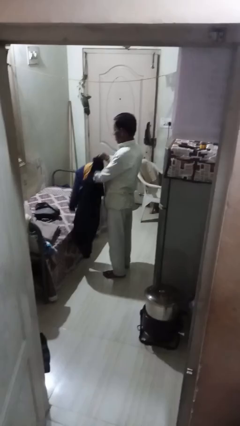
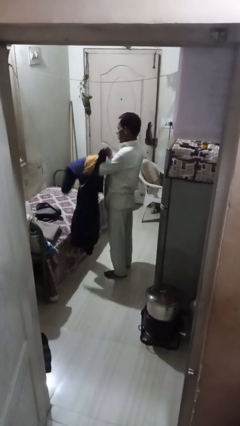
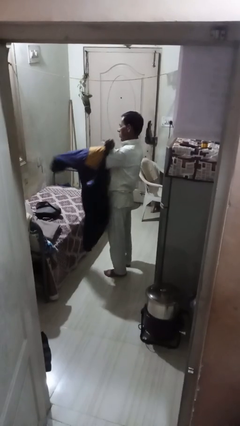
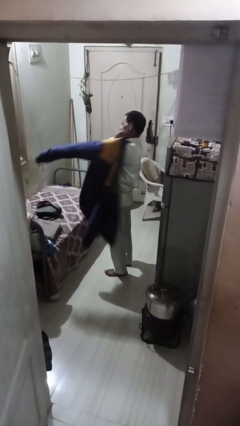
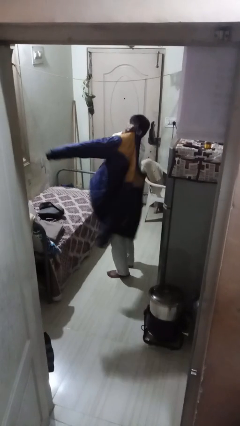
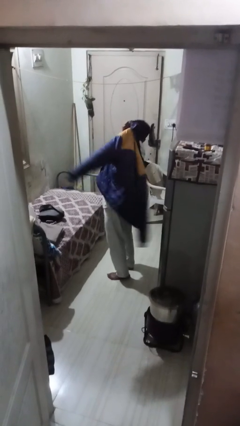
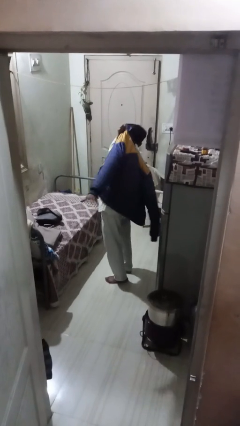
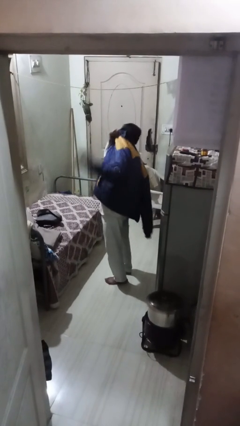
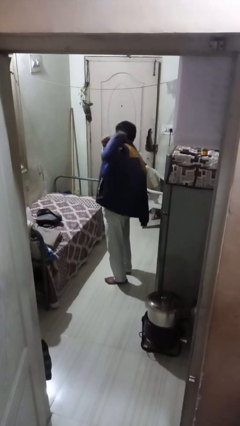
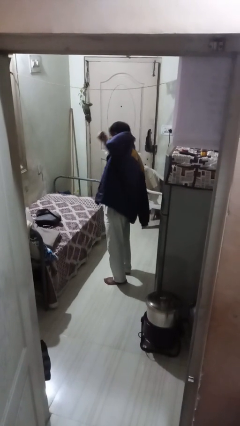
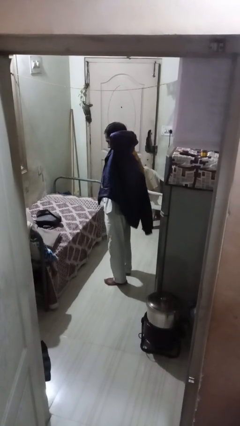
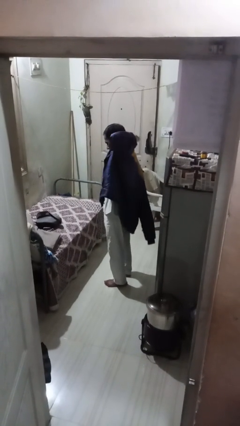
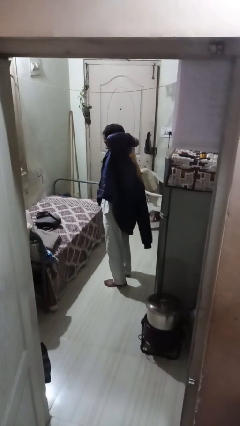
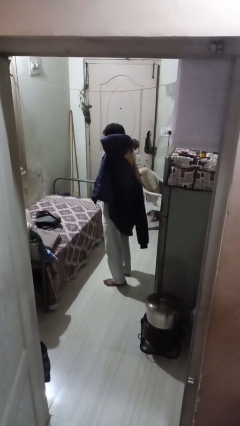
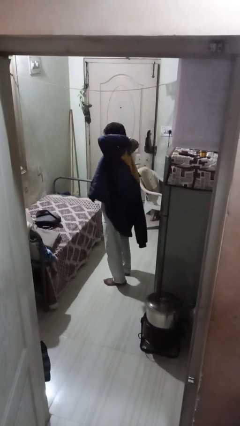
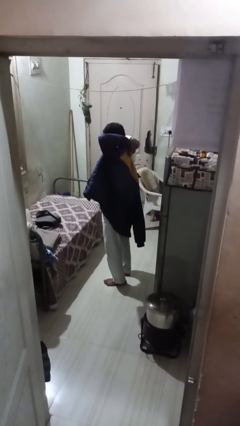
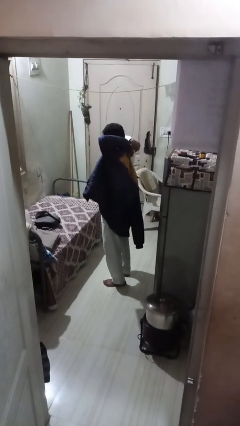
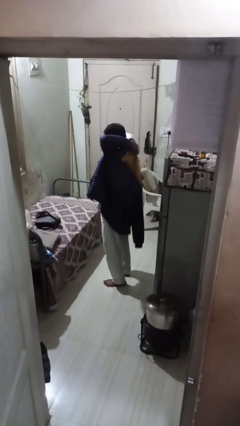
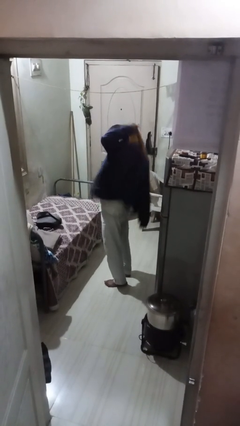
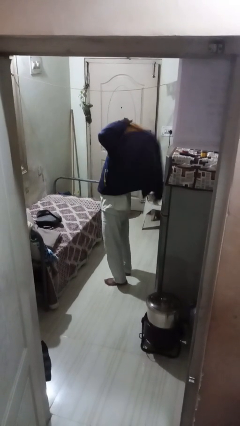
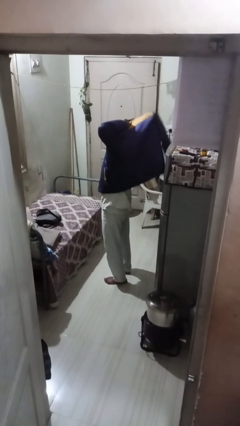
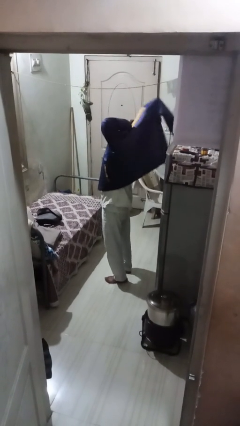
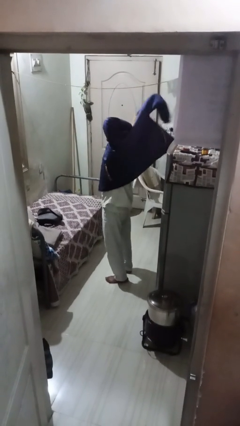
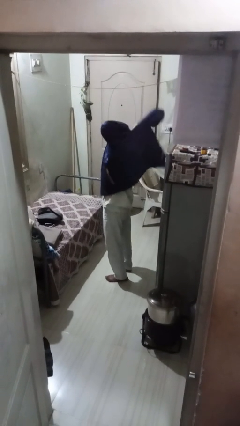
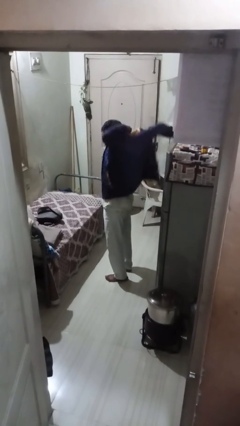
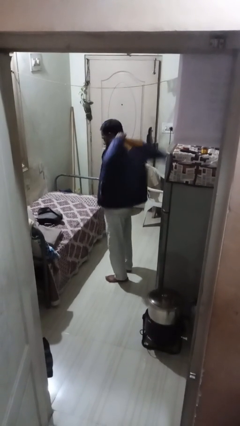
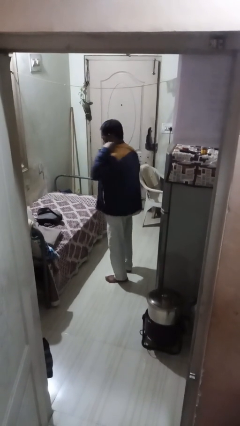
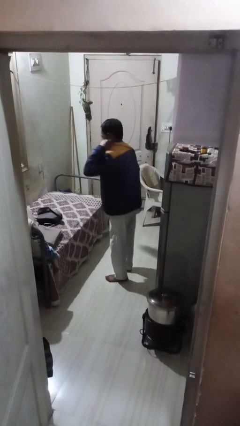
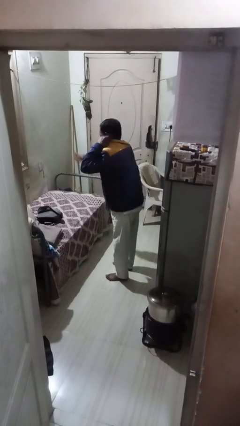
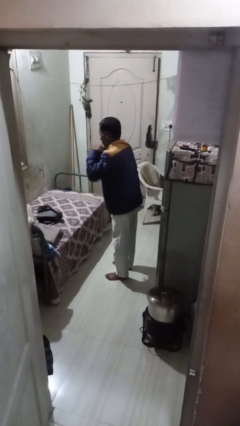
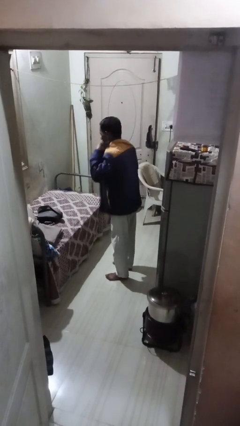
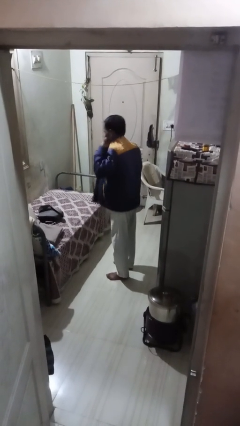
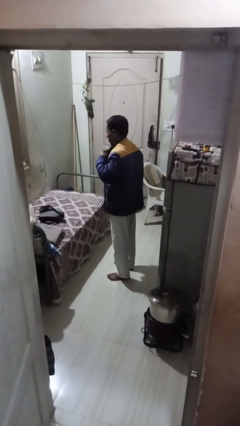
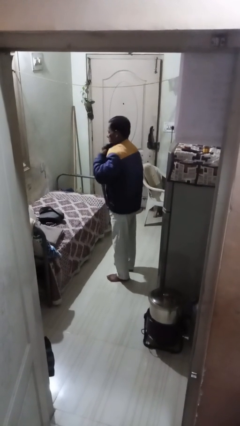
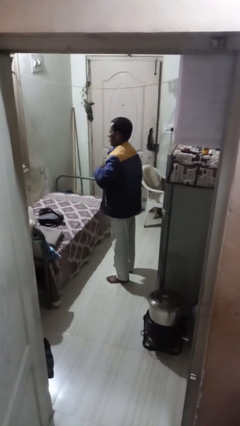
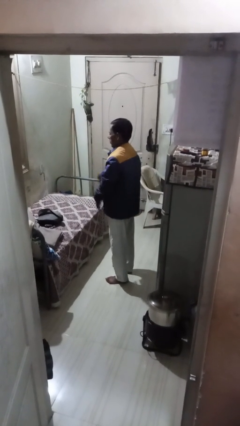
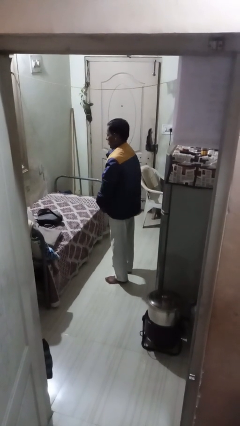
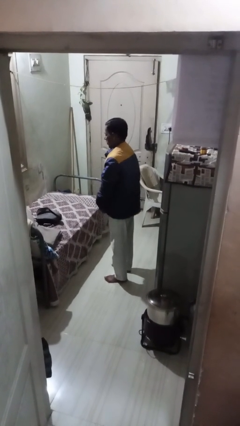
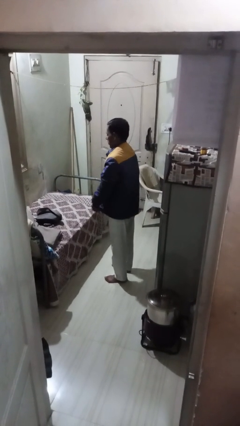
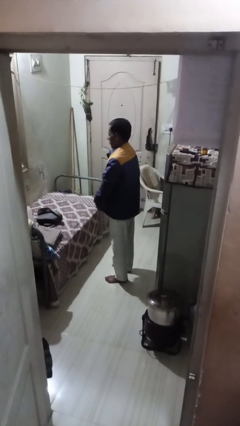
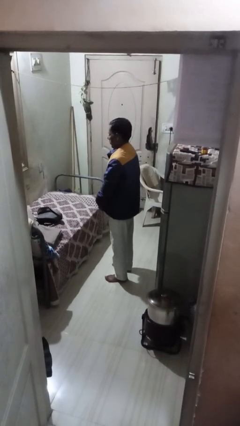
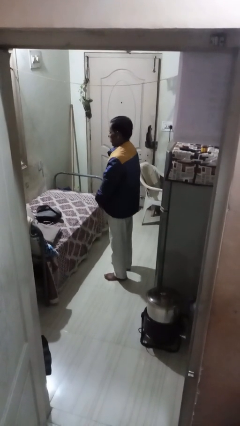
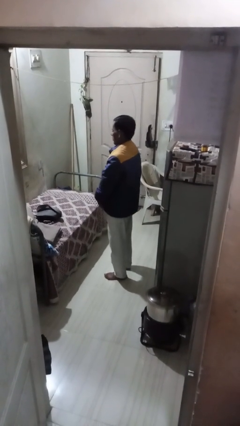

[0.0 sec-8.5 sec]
person puts on jacket

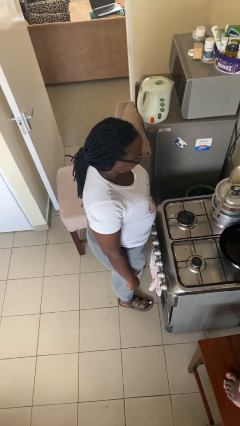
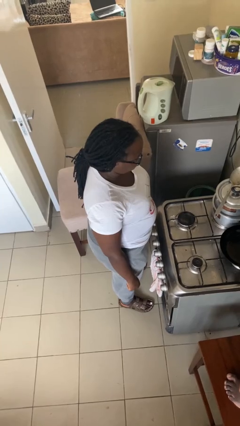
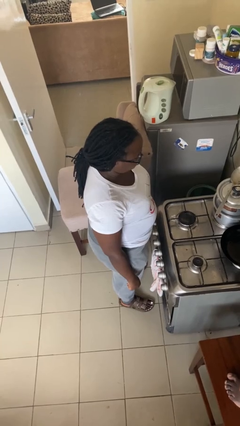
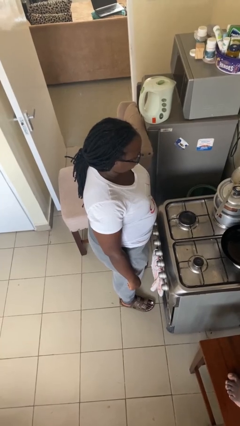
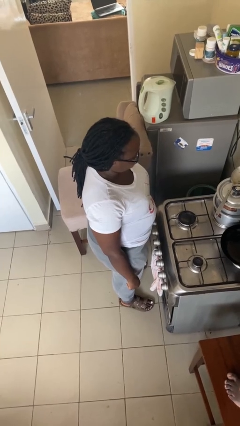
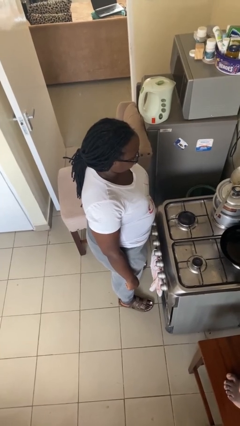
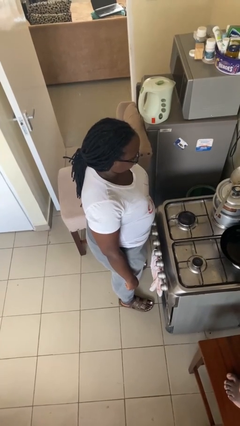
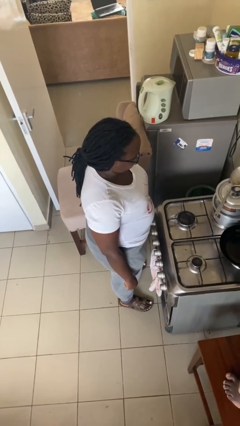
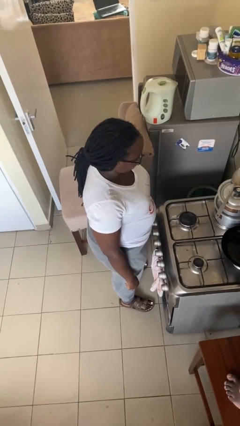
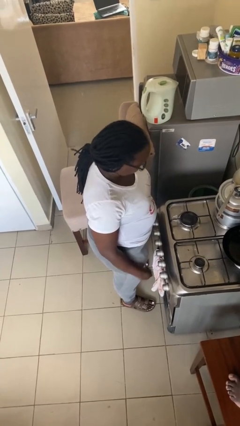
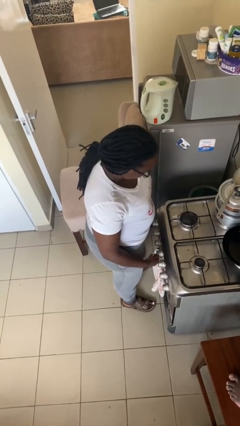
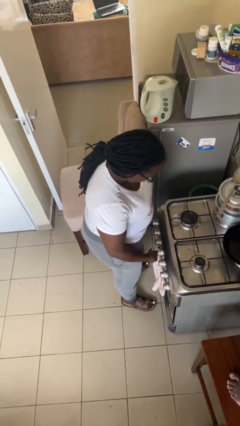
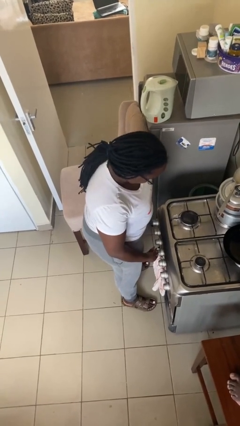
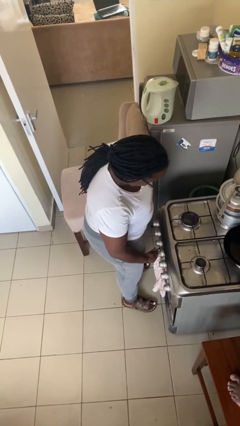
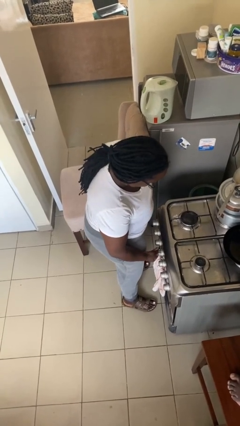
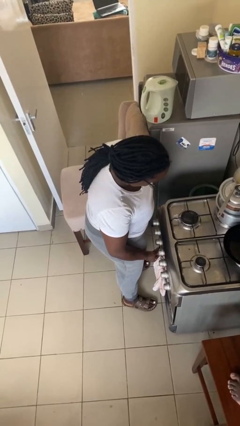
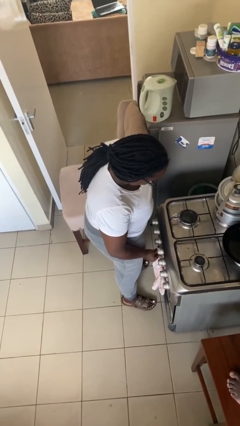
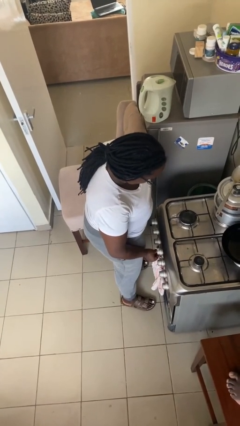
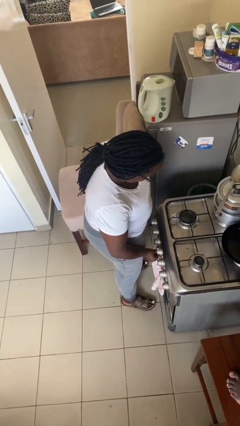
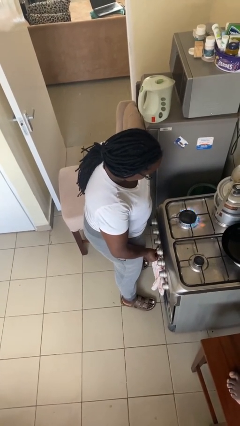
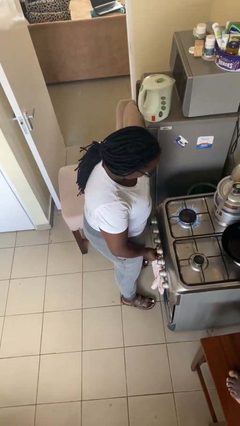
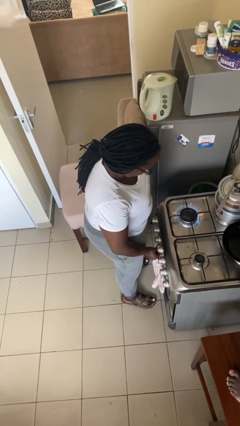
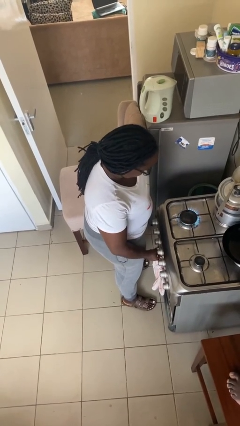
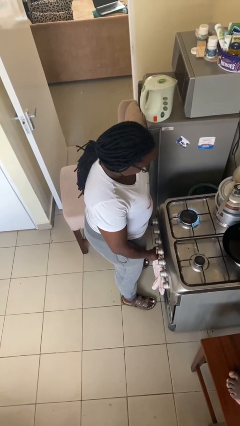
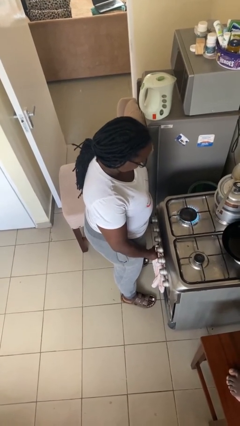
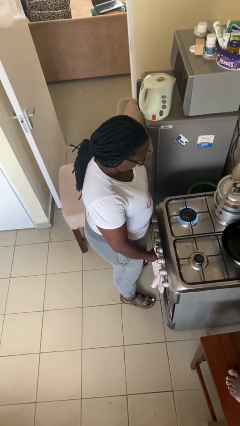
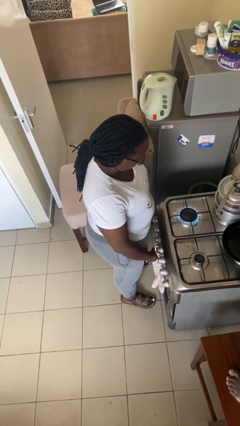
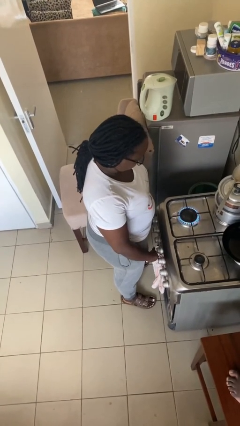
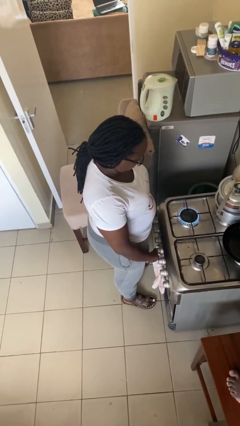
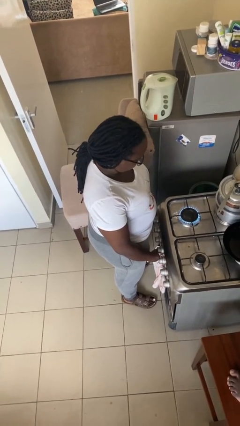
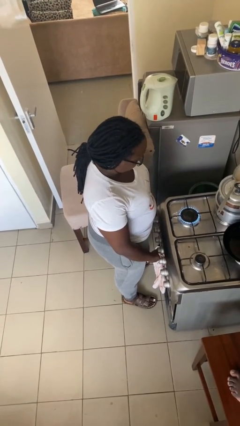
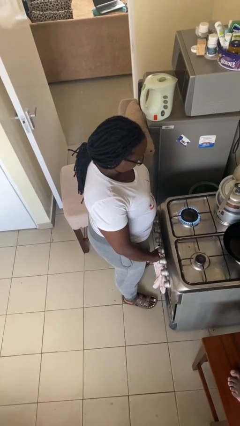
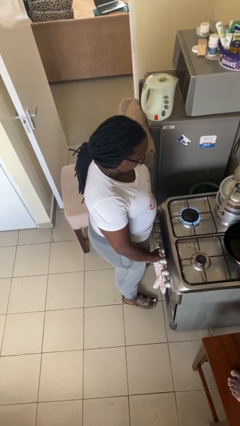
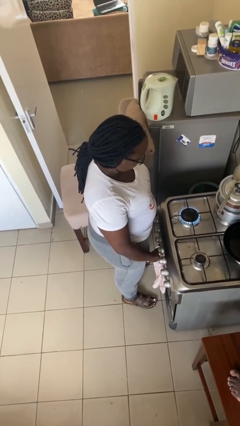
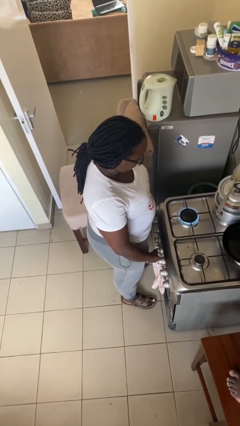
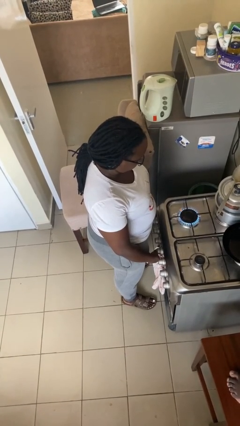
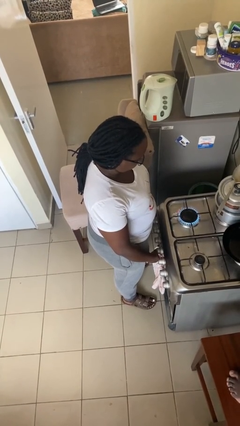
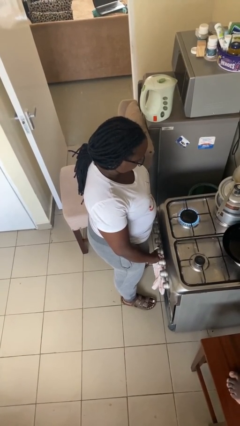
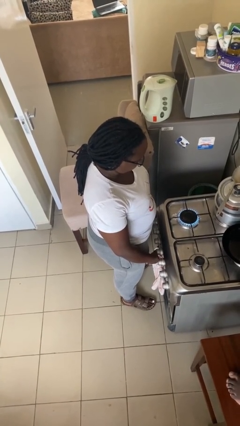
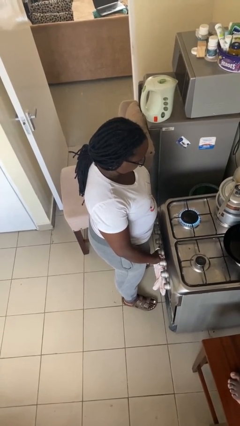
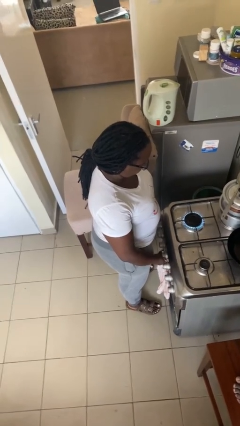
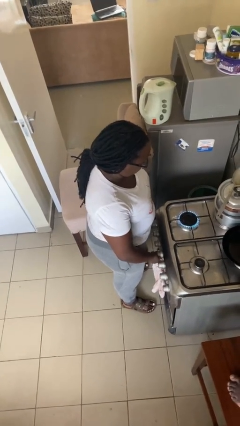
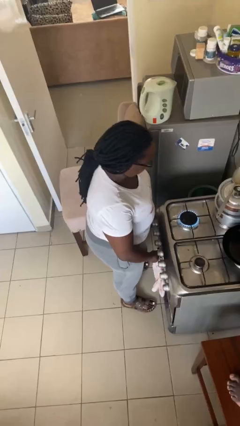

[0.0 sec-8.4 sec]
person turns on stovetop

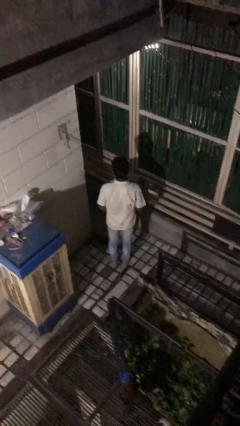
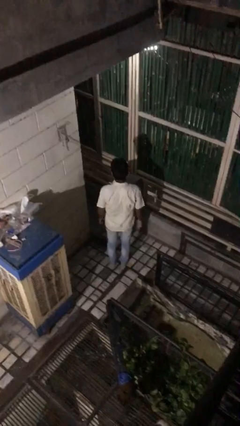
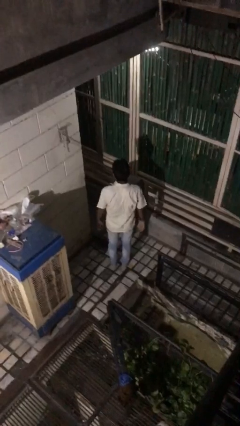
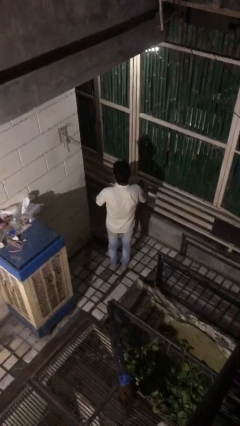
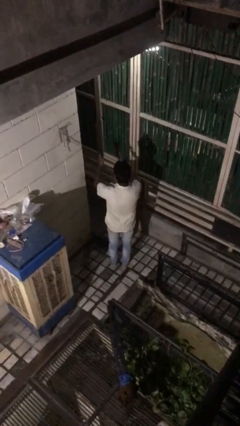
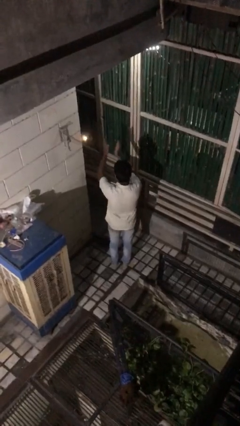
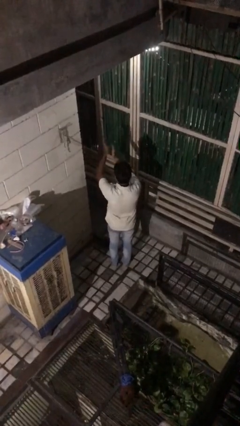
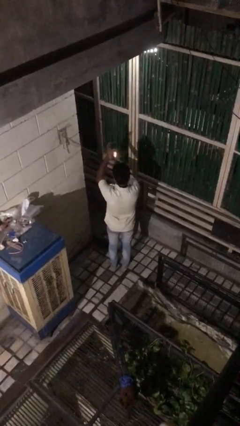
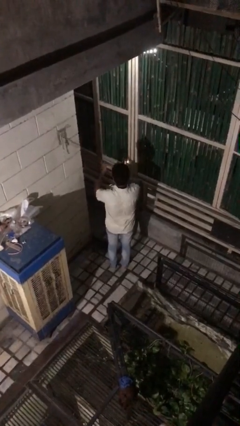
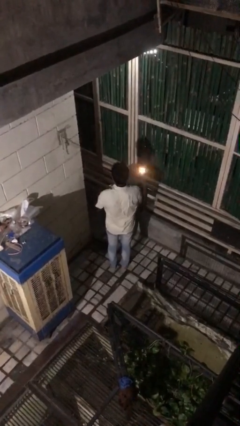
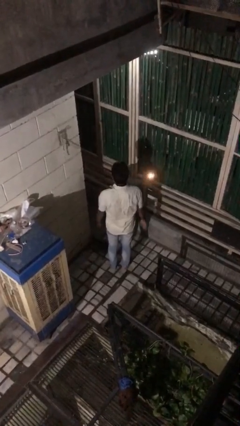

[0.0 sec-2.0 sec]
person claps hands
